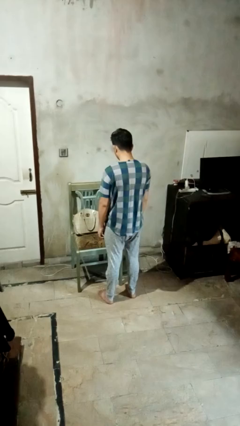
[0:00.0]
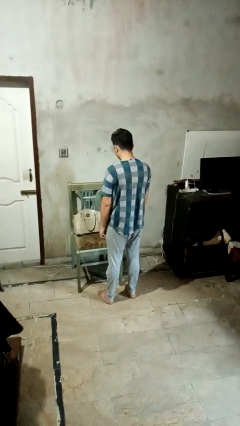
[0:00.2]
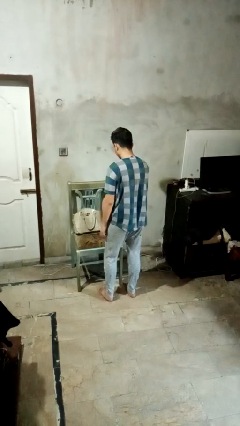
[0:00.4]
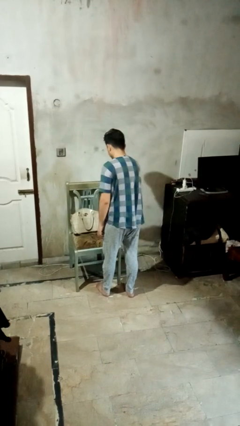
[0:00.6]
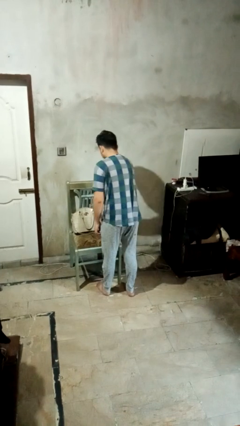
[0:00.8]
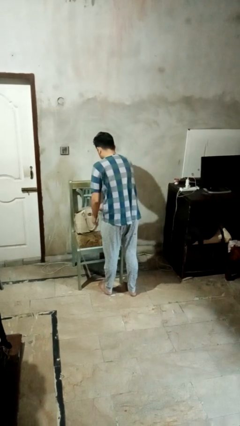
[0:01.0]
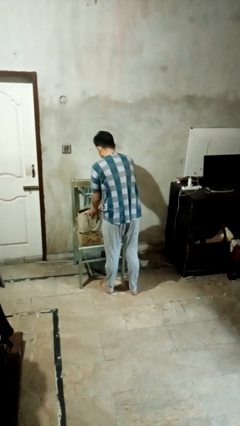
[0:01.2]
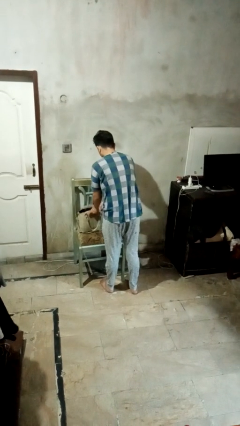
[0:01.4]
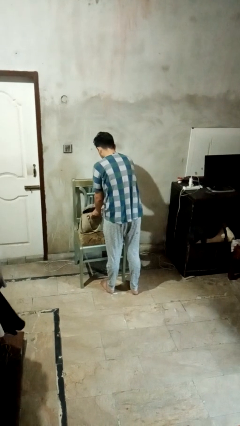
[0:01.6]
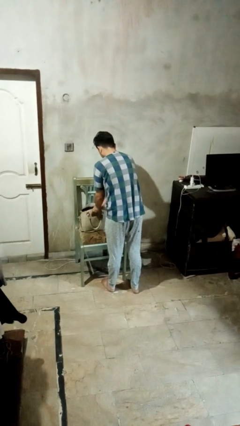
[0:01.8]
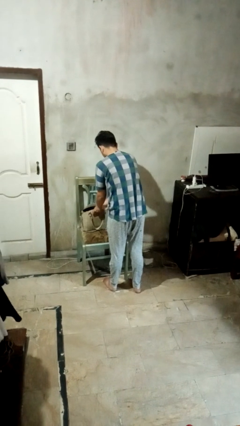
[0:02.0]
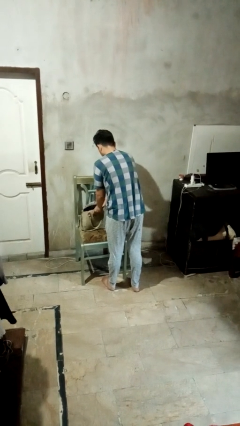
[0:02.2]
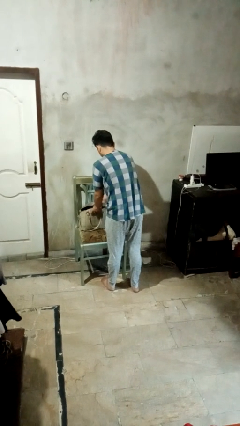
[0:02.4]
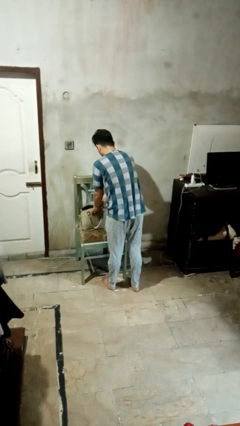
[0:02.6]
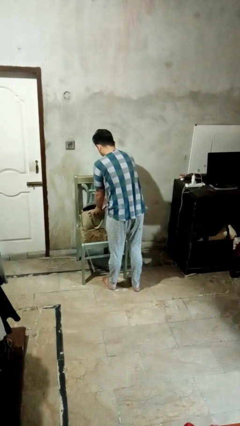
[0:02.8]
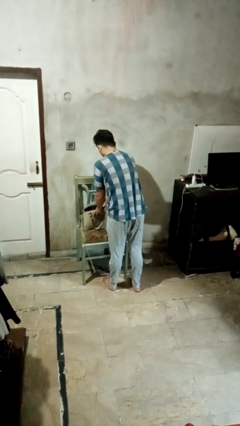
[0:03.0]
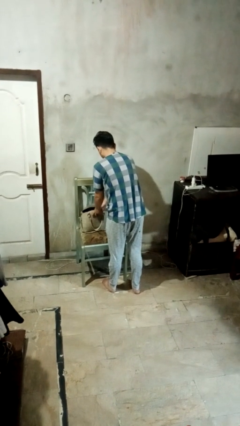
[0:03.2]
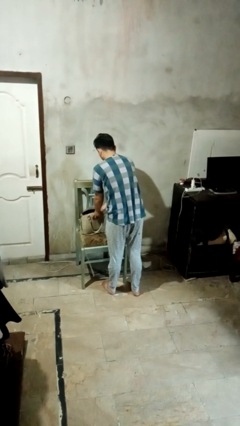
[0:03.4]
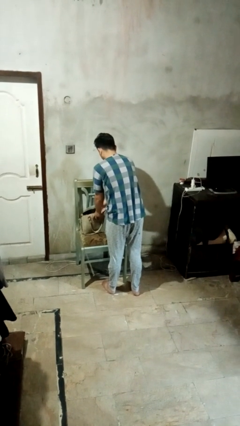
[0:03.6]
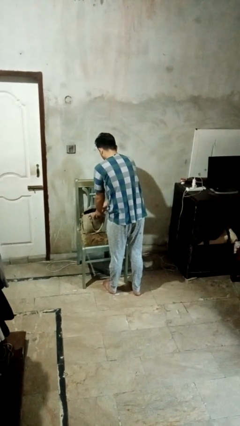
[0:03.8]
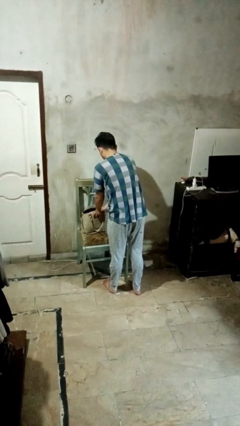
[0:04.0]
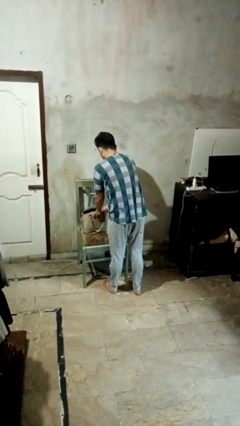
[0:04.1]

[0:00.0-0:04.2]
person searches in purse

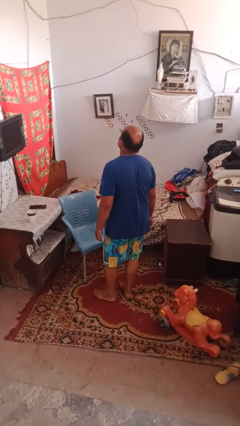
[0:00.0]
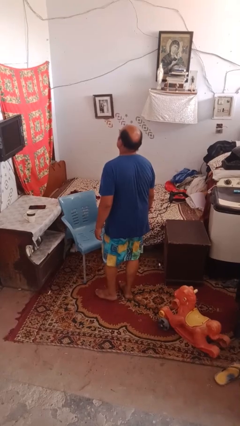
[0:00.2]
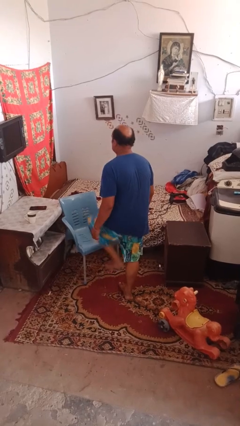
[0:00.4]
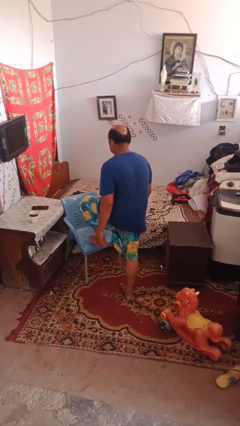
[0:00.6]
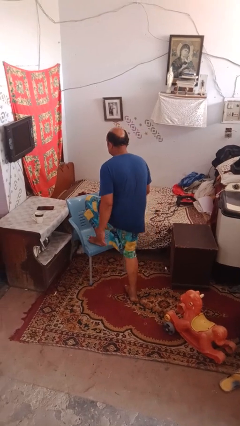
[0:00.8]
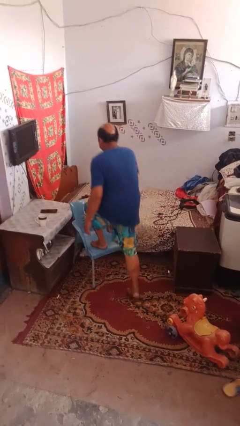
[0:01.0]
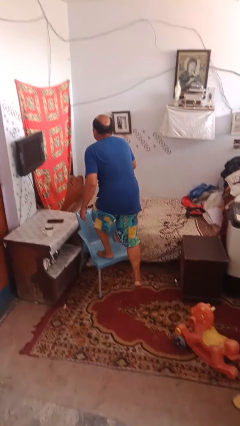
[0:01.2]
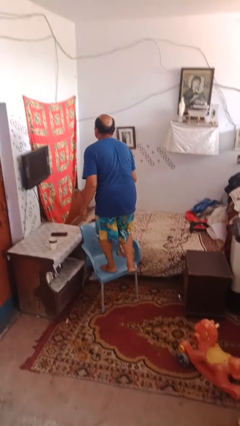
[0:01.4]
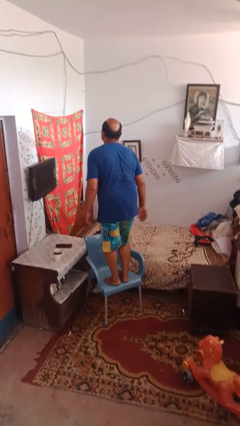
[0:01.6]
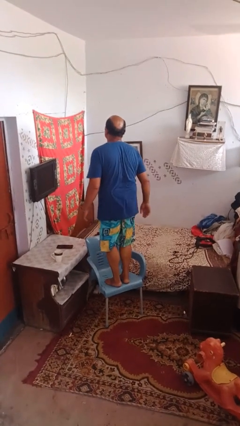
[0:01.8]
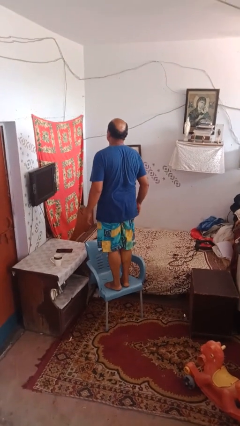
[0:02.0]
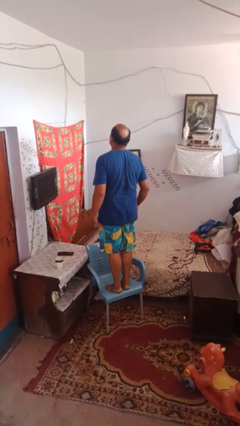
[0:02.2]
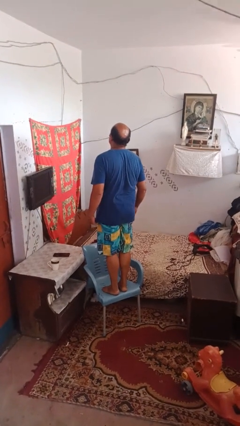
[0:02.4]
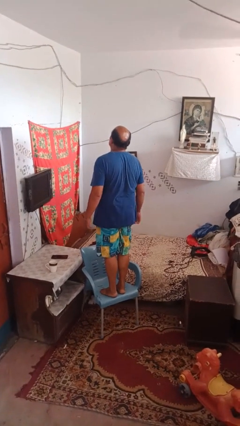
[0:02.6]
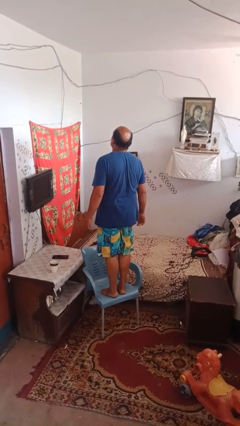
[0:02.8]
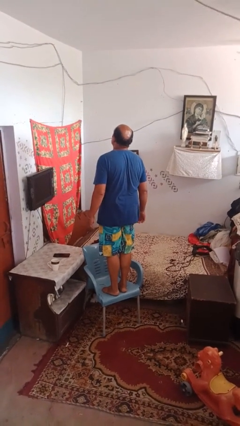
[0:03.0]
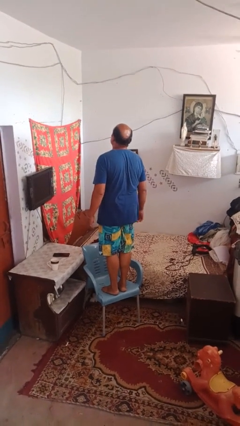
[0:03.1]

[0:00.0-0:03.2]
person climbs on chair

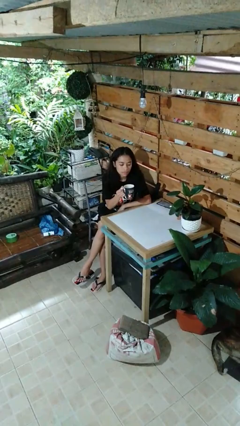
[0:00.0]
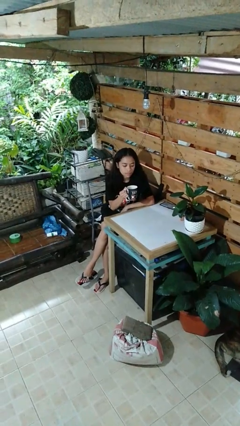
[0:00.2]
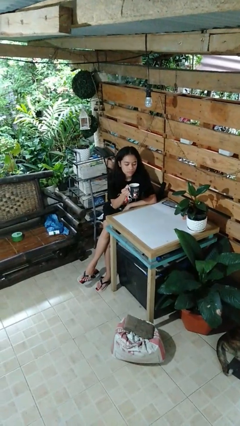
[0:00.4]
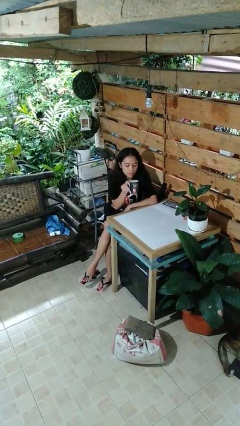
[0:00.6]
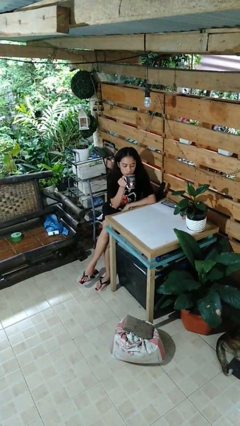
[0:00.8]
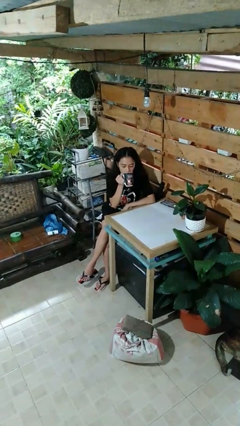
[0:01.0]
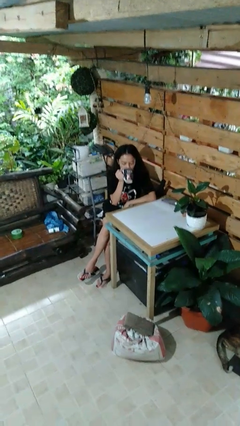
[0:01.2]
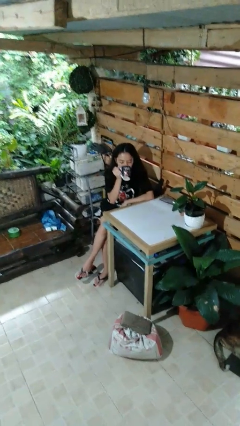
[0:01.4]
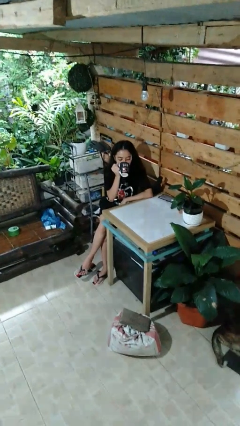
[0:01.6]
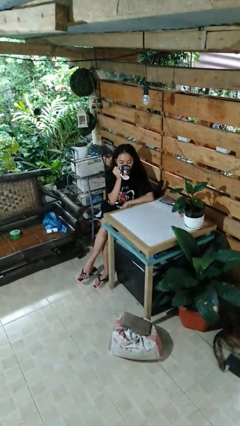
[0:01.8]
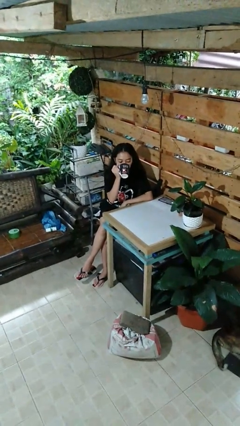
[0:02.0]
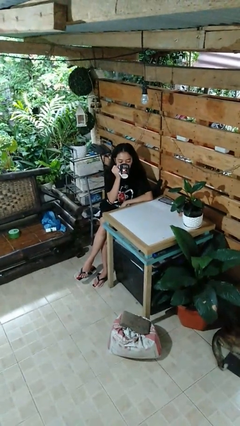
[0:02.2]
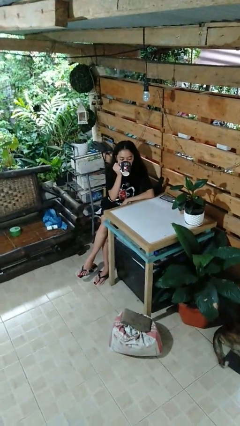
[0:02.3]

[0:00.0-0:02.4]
person drinks from mug

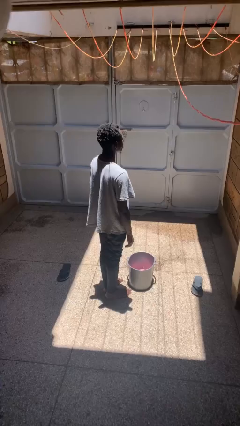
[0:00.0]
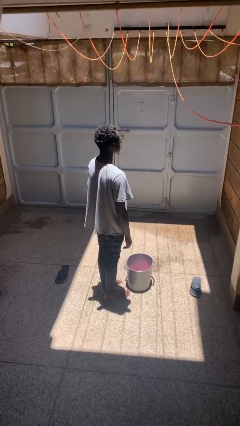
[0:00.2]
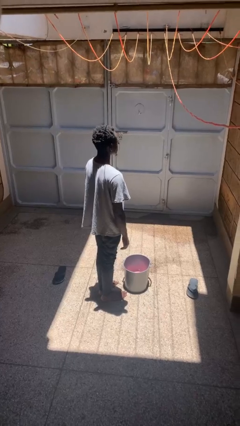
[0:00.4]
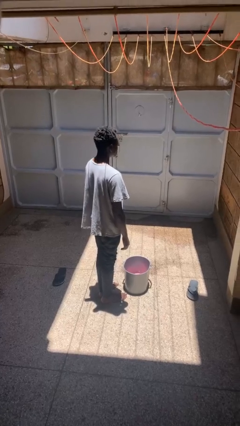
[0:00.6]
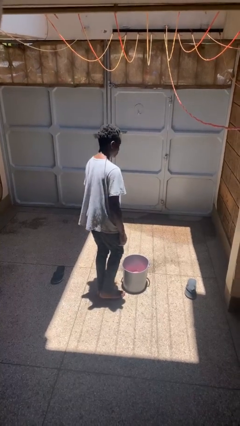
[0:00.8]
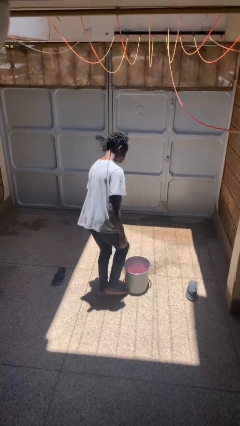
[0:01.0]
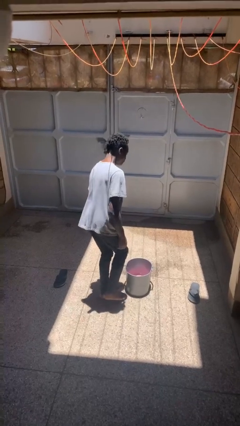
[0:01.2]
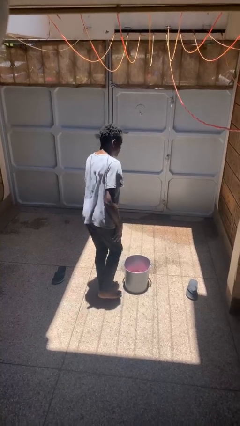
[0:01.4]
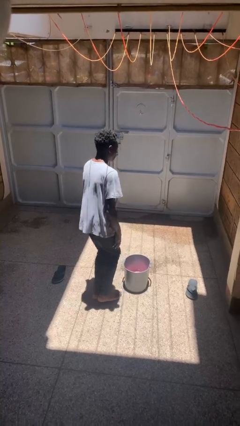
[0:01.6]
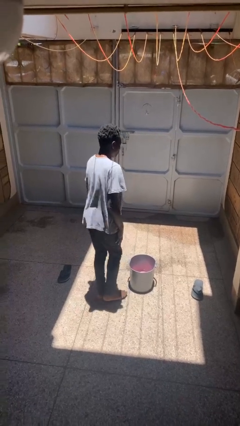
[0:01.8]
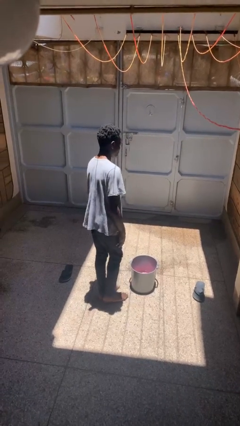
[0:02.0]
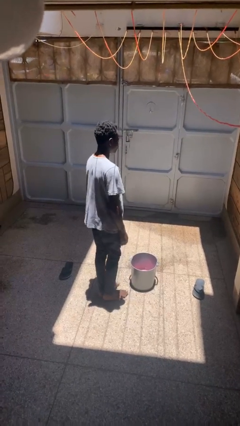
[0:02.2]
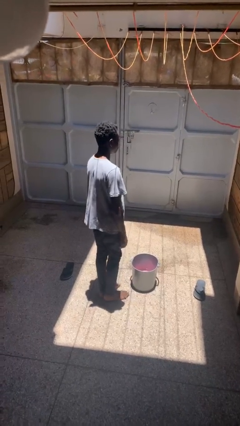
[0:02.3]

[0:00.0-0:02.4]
person stubs toe

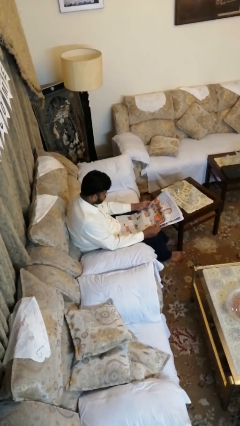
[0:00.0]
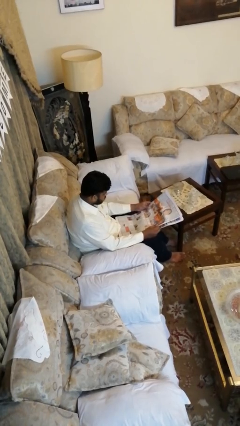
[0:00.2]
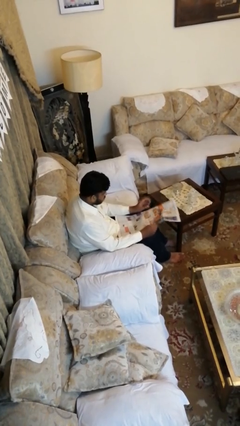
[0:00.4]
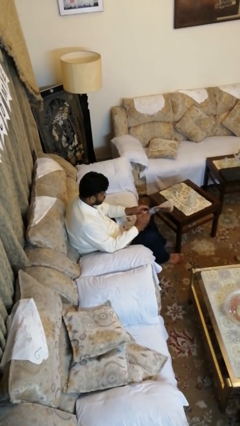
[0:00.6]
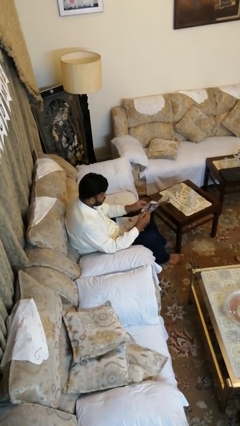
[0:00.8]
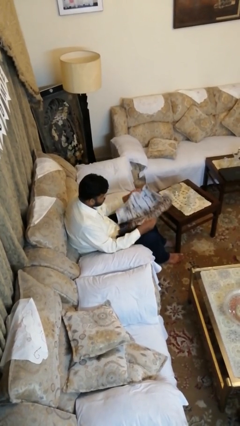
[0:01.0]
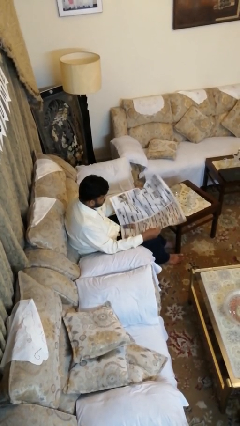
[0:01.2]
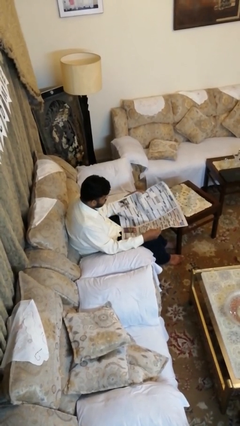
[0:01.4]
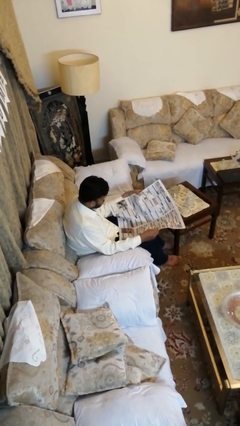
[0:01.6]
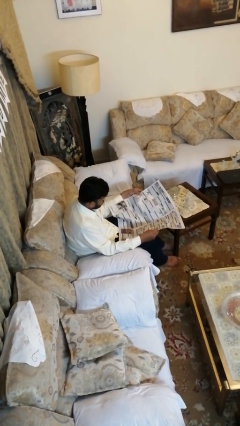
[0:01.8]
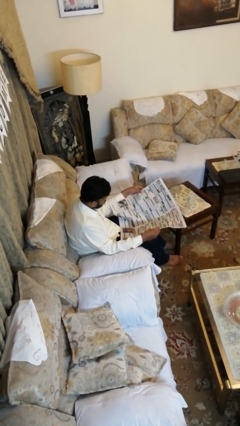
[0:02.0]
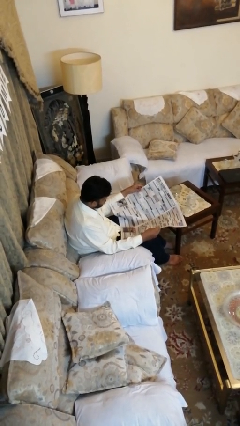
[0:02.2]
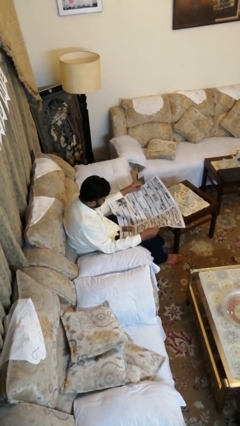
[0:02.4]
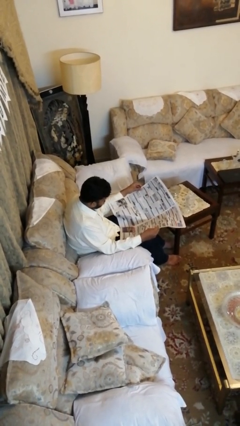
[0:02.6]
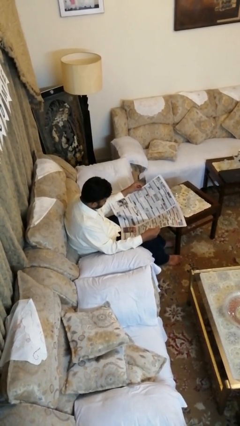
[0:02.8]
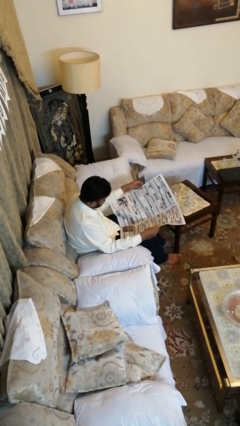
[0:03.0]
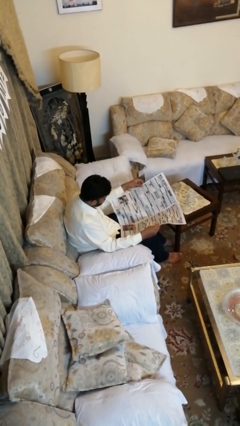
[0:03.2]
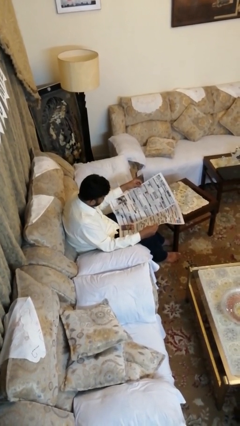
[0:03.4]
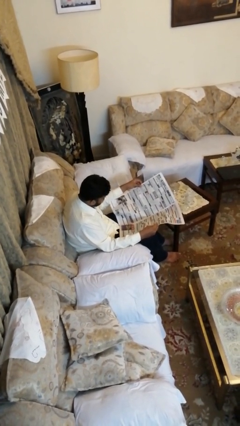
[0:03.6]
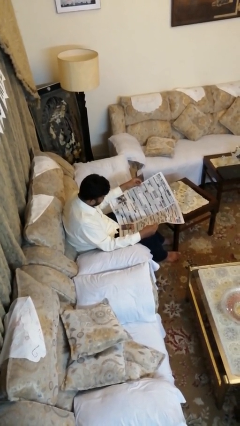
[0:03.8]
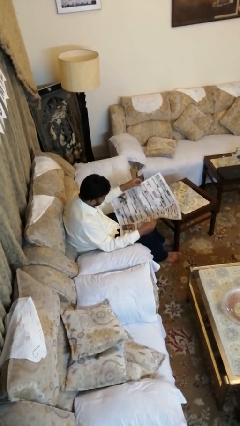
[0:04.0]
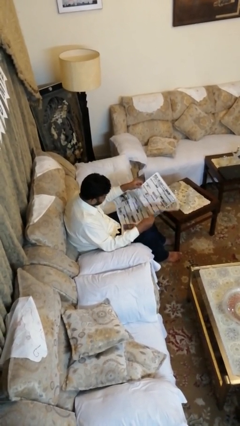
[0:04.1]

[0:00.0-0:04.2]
person reads newspaper

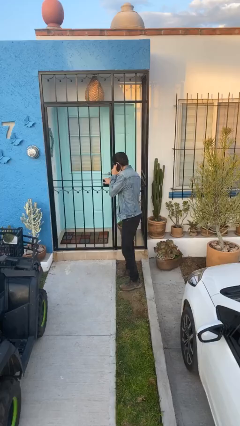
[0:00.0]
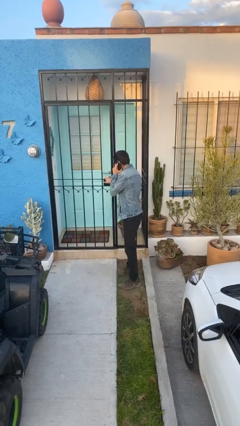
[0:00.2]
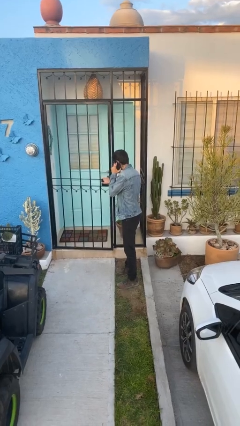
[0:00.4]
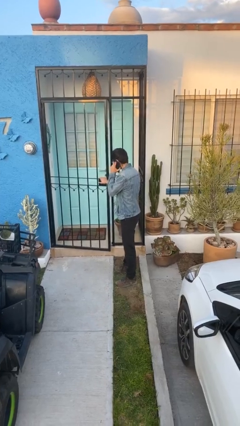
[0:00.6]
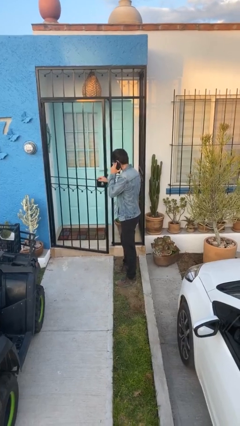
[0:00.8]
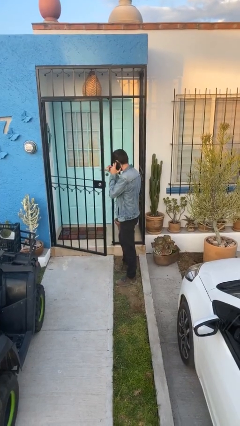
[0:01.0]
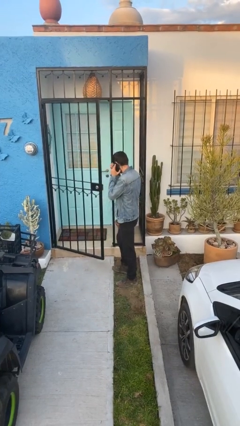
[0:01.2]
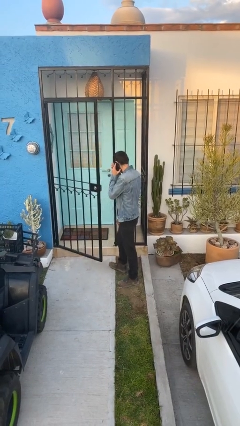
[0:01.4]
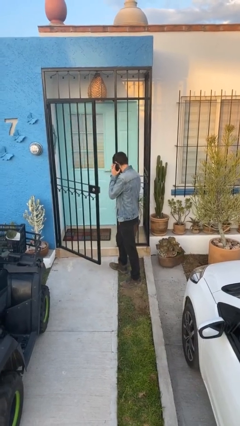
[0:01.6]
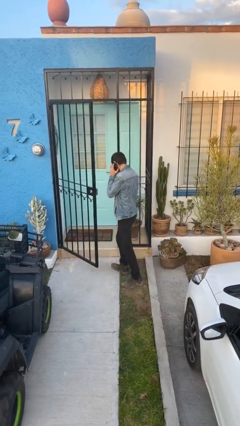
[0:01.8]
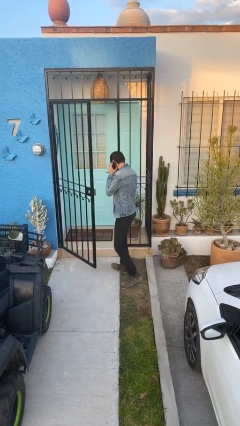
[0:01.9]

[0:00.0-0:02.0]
person opens facility door
